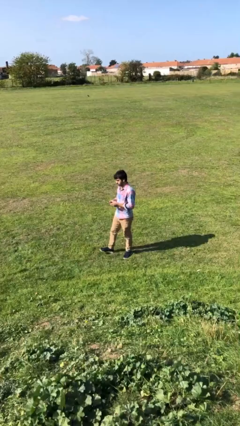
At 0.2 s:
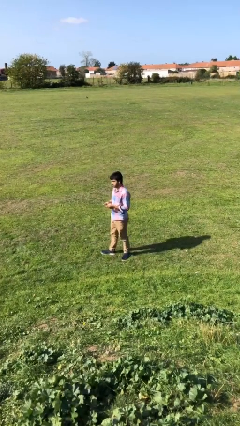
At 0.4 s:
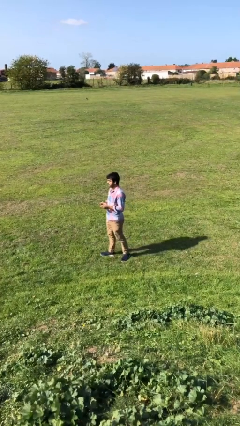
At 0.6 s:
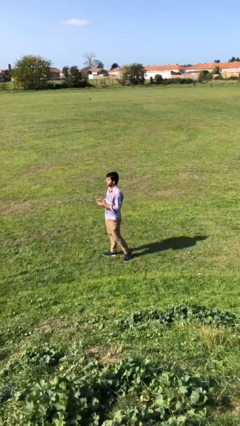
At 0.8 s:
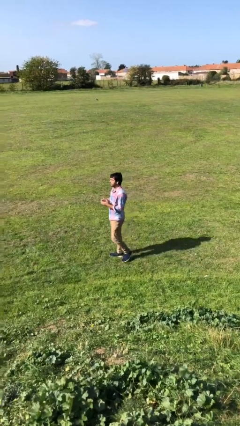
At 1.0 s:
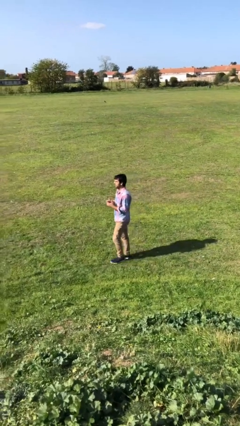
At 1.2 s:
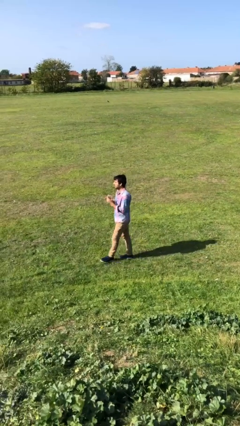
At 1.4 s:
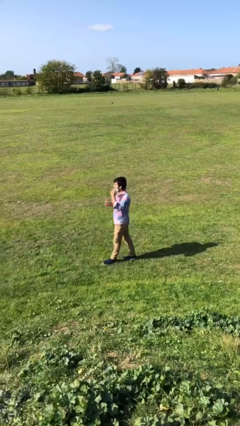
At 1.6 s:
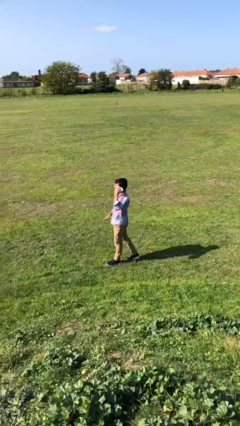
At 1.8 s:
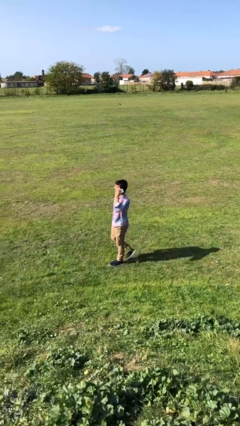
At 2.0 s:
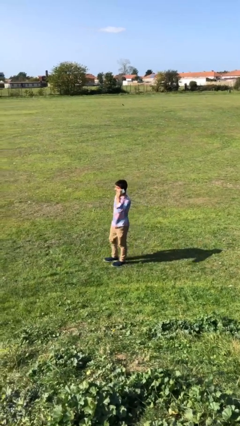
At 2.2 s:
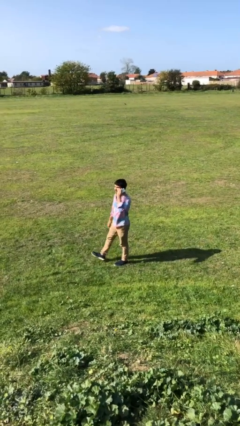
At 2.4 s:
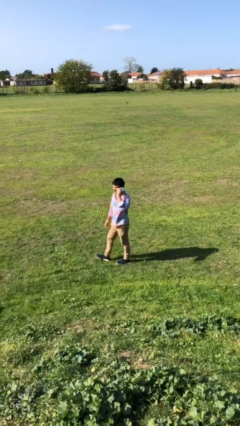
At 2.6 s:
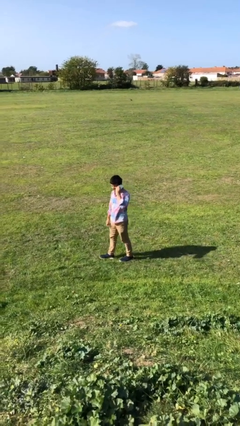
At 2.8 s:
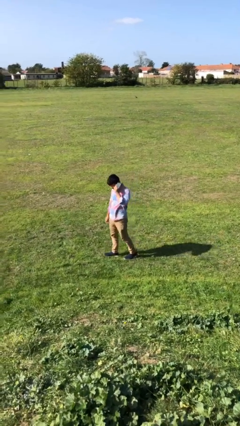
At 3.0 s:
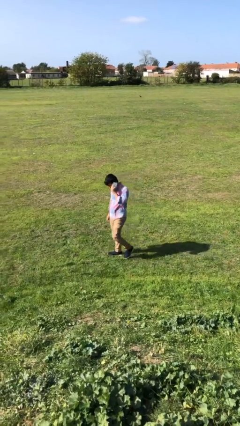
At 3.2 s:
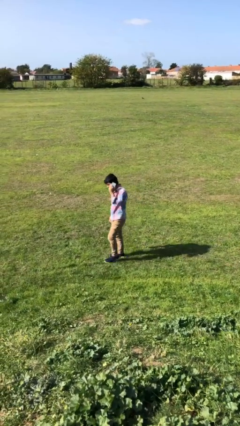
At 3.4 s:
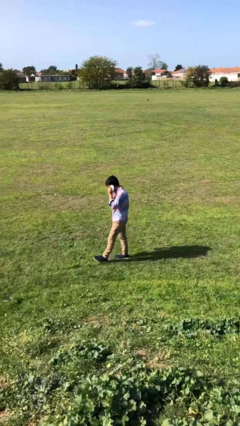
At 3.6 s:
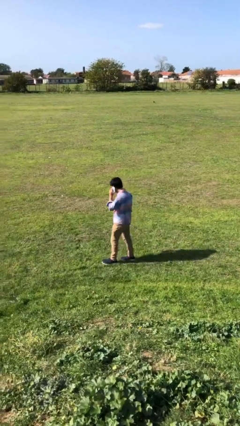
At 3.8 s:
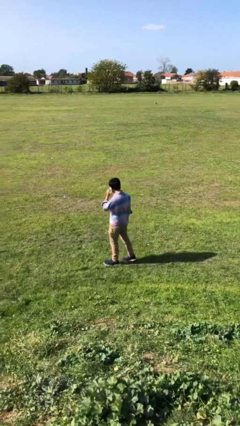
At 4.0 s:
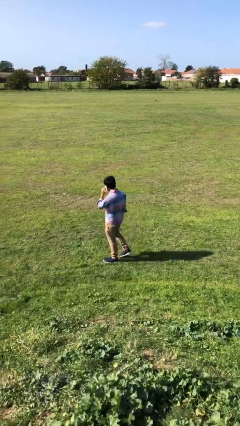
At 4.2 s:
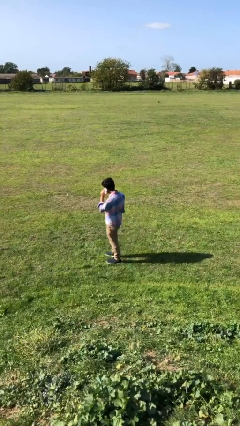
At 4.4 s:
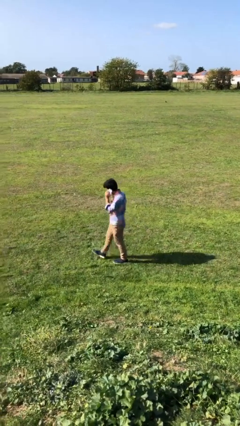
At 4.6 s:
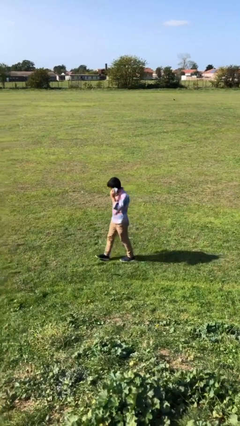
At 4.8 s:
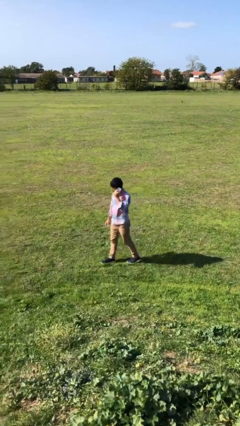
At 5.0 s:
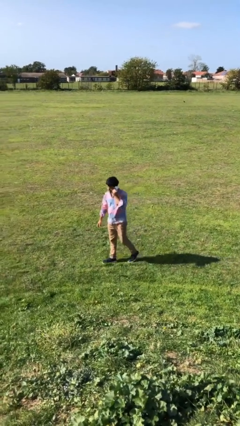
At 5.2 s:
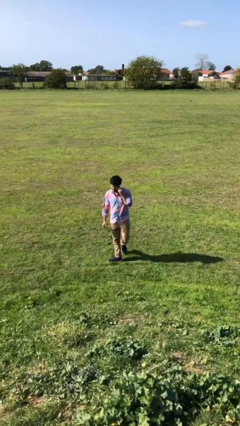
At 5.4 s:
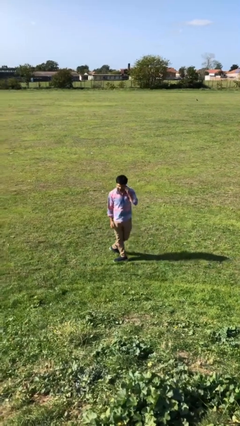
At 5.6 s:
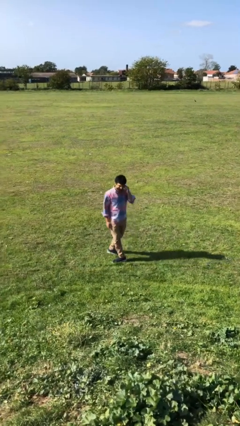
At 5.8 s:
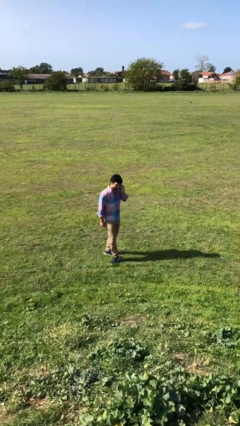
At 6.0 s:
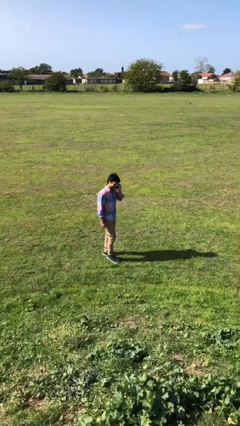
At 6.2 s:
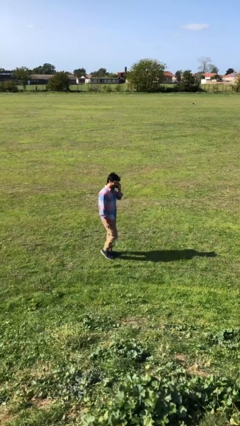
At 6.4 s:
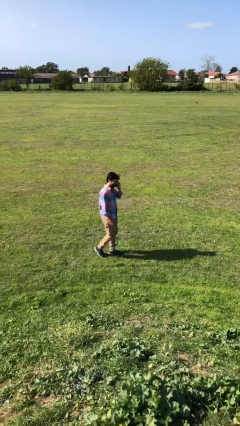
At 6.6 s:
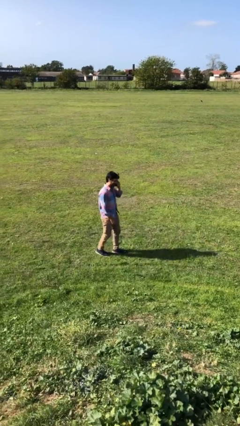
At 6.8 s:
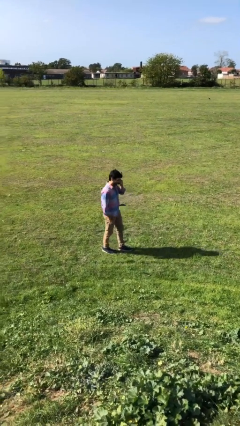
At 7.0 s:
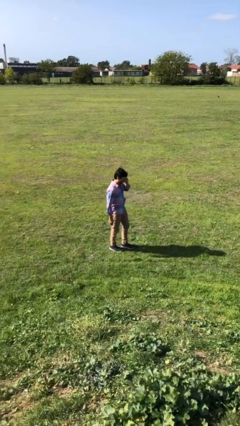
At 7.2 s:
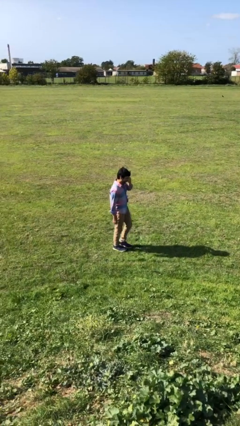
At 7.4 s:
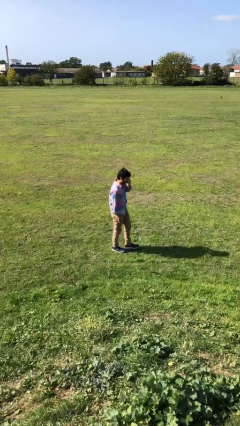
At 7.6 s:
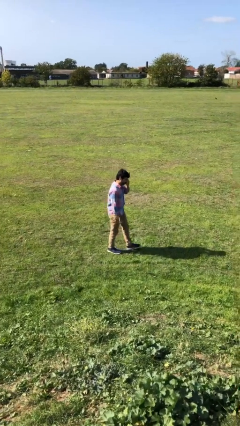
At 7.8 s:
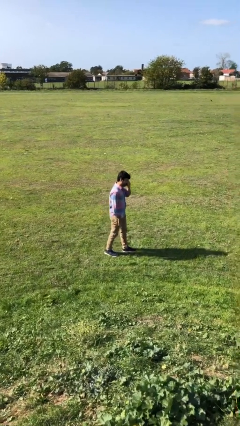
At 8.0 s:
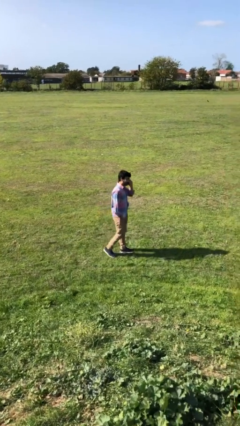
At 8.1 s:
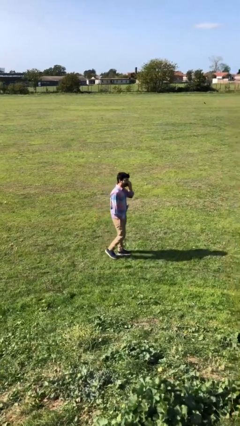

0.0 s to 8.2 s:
person talks on phone

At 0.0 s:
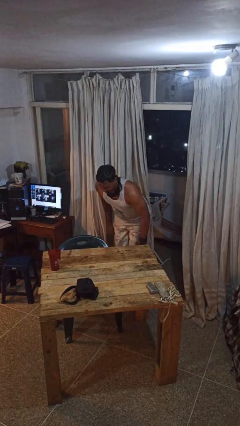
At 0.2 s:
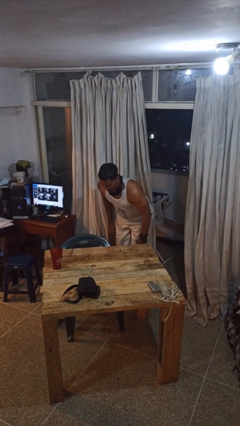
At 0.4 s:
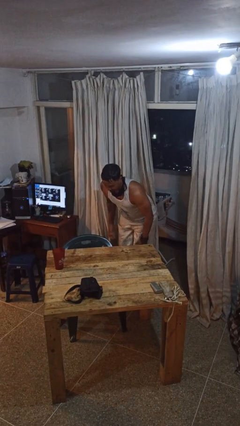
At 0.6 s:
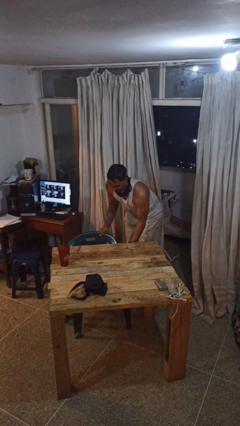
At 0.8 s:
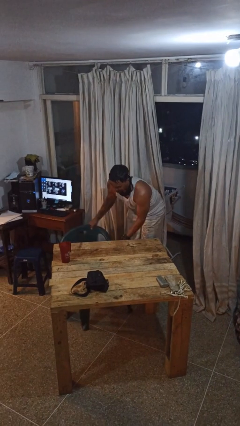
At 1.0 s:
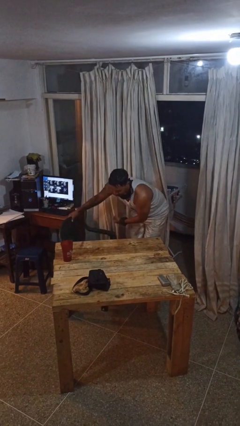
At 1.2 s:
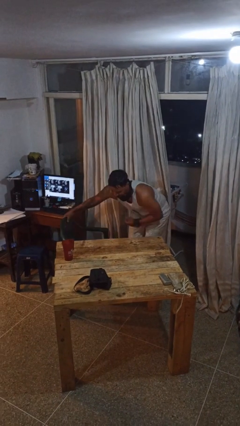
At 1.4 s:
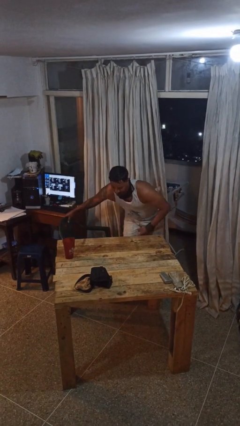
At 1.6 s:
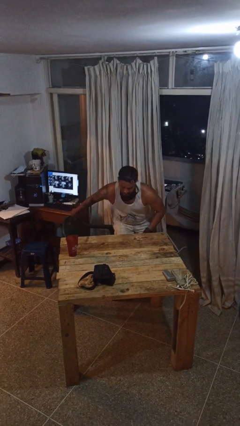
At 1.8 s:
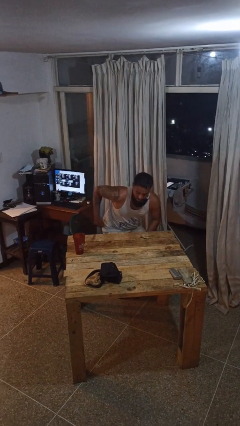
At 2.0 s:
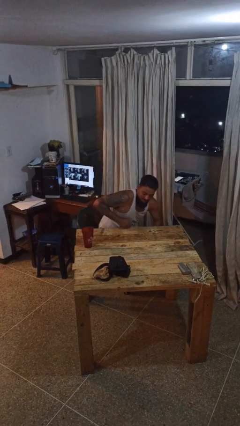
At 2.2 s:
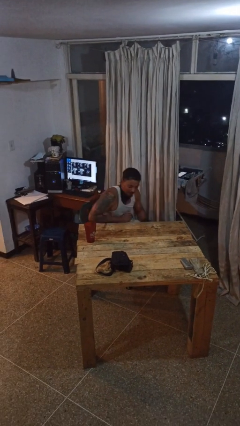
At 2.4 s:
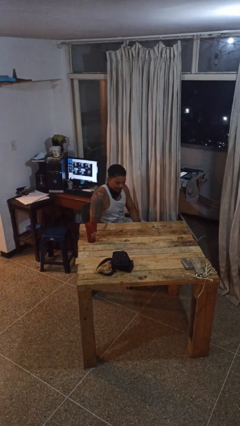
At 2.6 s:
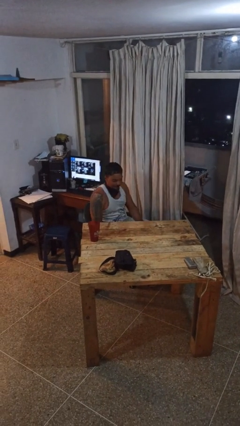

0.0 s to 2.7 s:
person sits down

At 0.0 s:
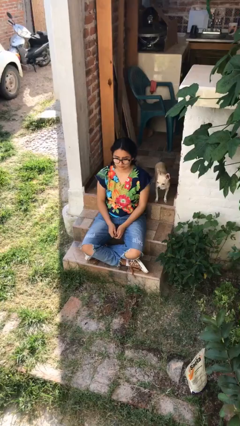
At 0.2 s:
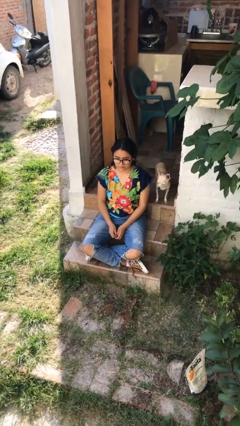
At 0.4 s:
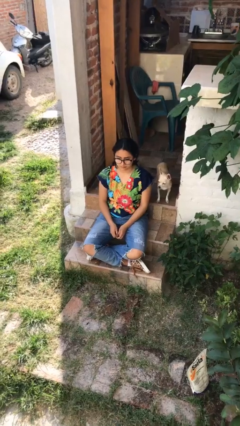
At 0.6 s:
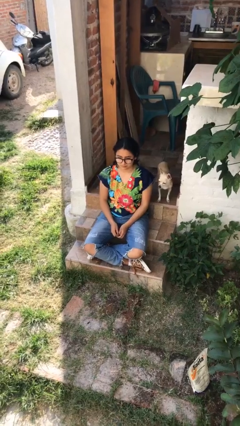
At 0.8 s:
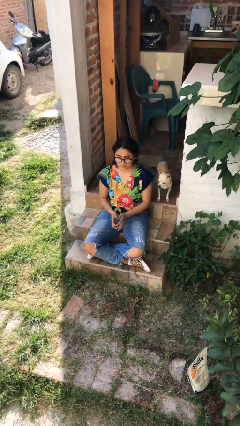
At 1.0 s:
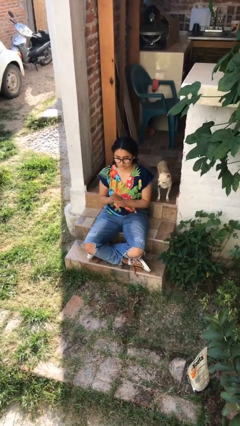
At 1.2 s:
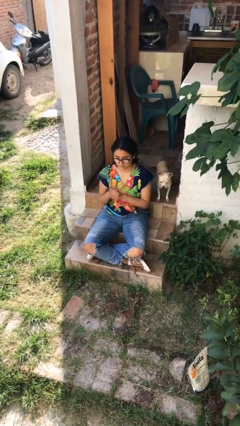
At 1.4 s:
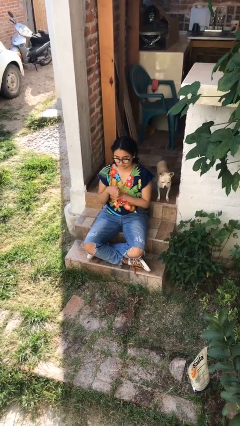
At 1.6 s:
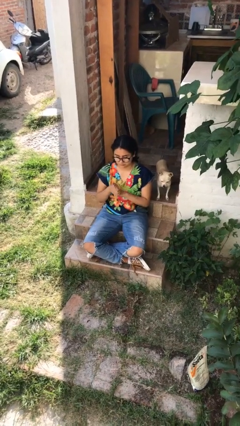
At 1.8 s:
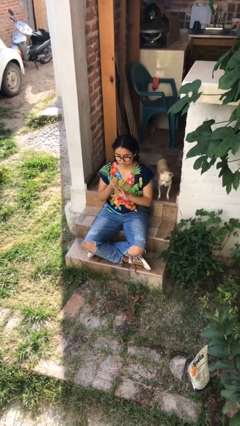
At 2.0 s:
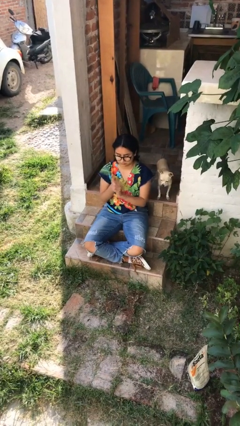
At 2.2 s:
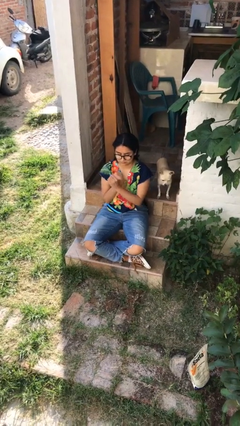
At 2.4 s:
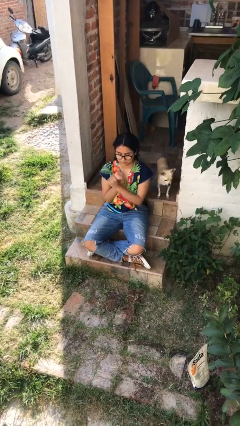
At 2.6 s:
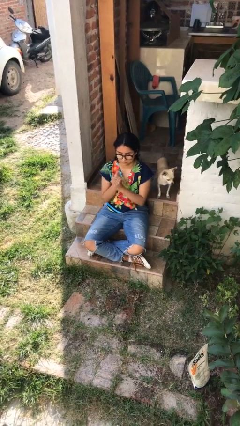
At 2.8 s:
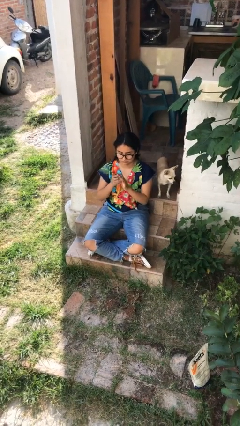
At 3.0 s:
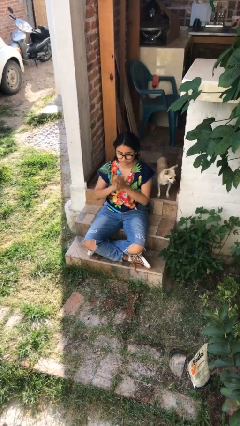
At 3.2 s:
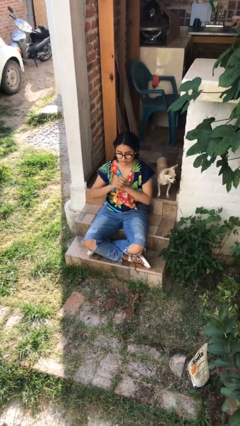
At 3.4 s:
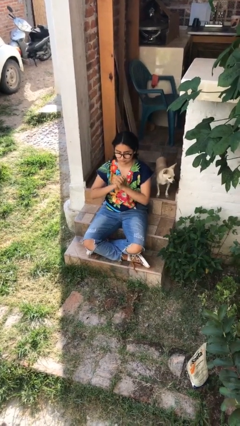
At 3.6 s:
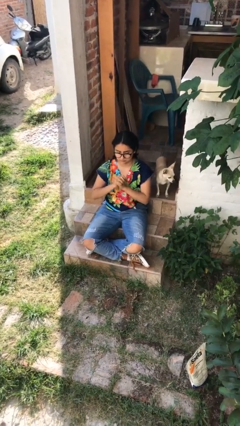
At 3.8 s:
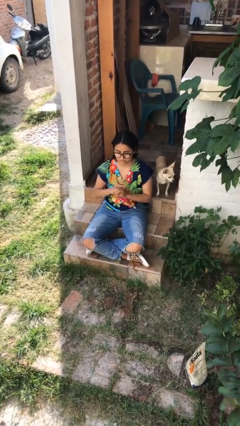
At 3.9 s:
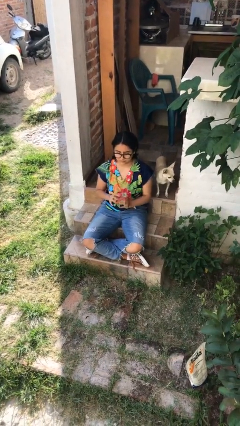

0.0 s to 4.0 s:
person cracks knuckles

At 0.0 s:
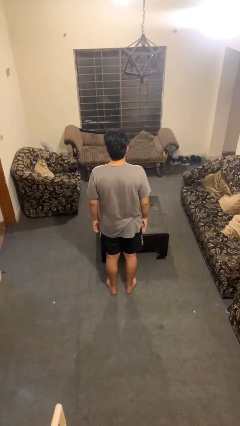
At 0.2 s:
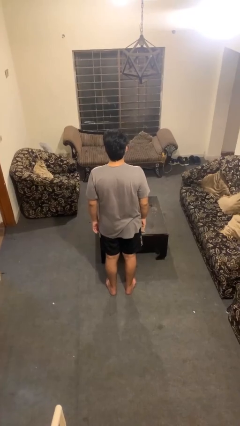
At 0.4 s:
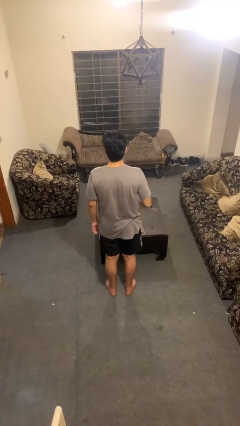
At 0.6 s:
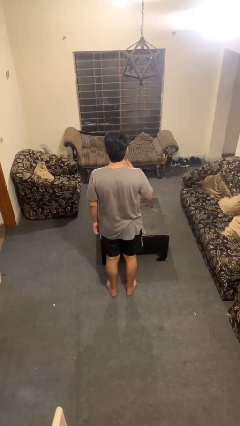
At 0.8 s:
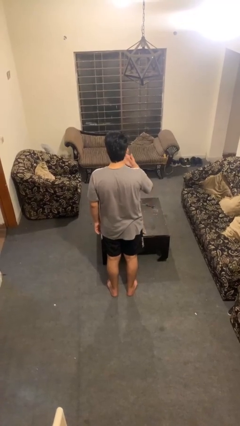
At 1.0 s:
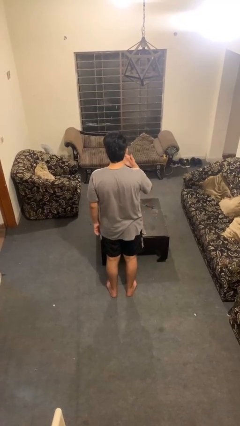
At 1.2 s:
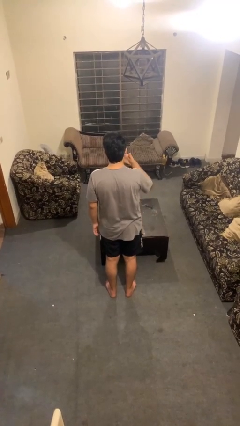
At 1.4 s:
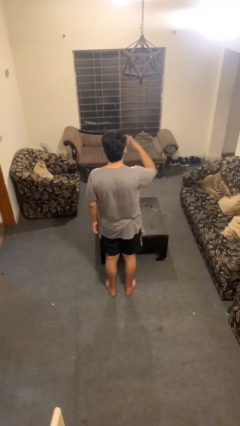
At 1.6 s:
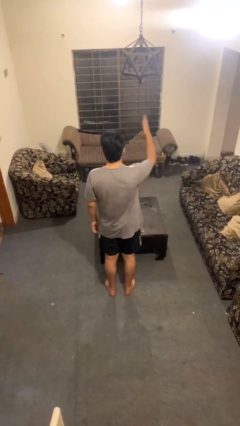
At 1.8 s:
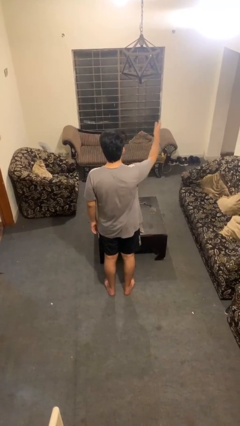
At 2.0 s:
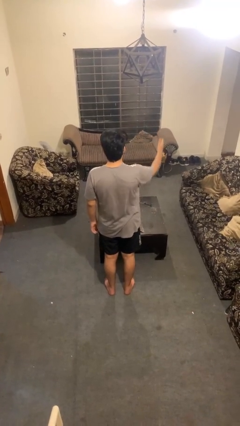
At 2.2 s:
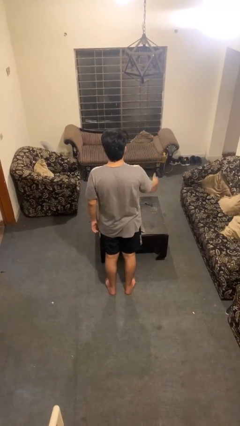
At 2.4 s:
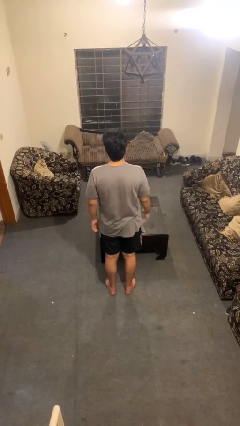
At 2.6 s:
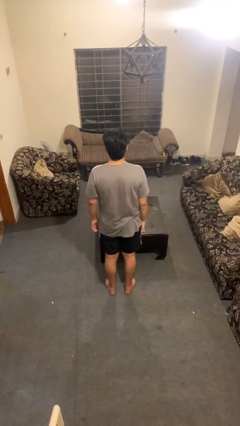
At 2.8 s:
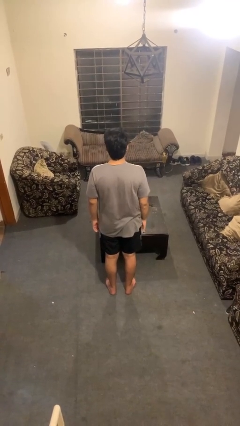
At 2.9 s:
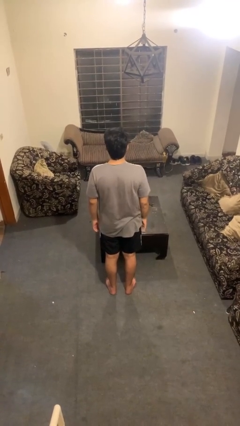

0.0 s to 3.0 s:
person gestures blow kiss

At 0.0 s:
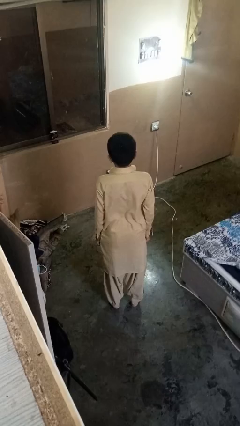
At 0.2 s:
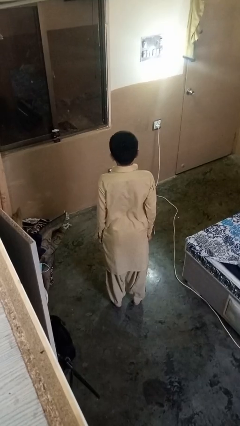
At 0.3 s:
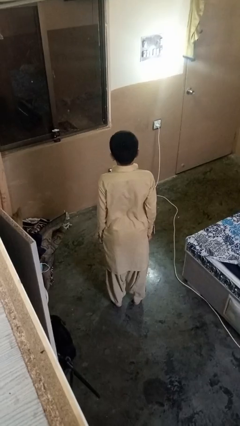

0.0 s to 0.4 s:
person jumps
